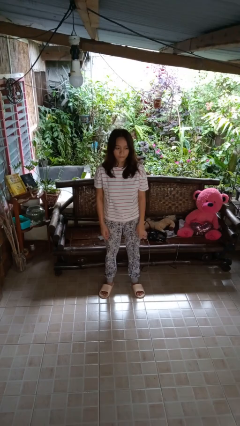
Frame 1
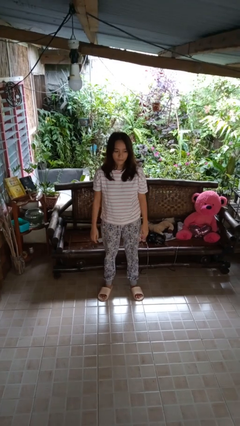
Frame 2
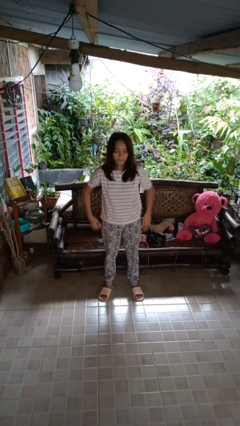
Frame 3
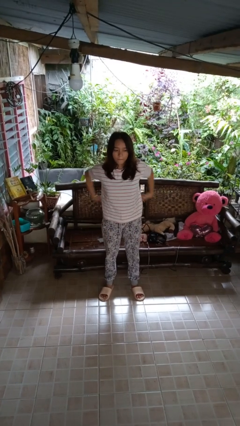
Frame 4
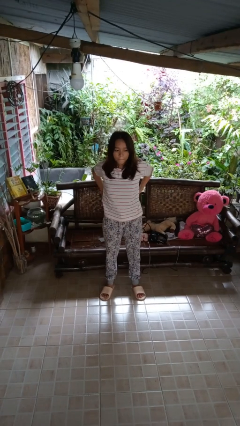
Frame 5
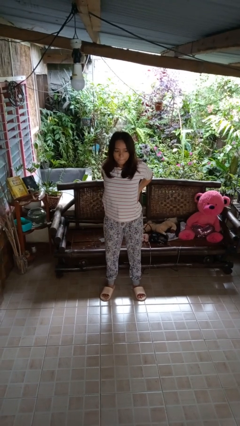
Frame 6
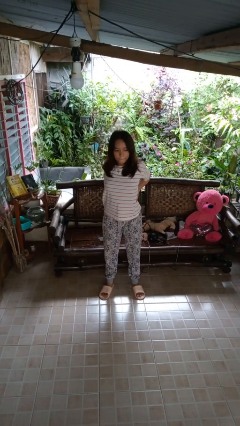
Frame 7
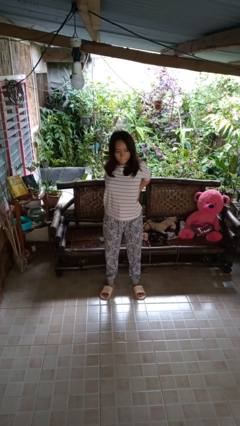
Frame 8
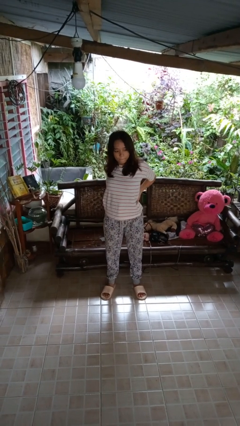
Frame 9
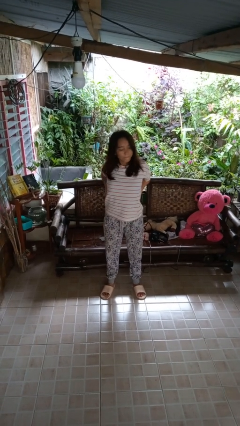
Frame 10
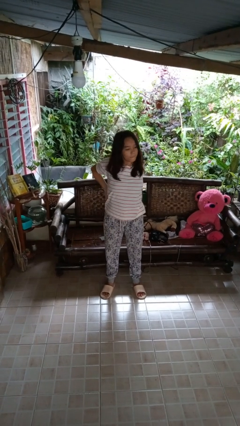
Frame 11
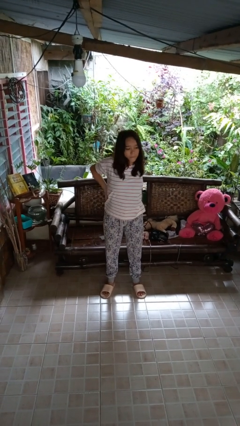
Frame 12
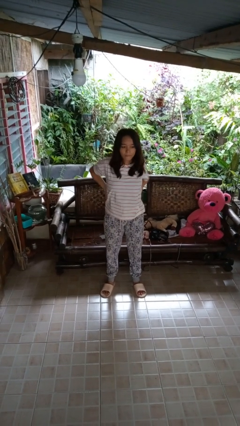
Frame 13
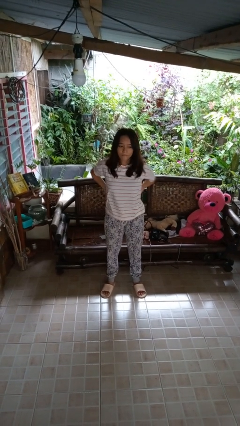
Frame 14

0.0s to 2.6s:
person stretches back

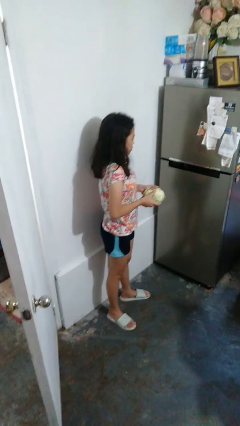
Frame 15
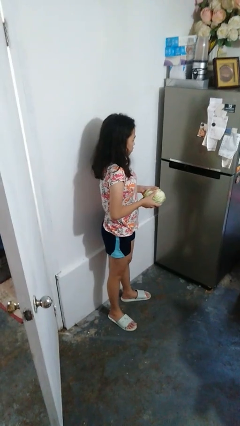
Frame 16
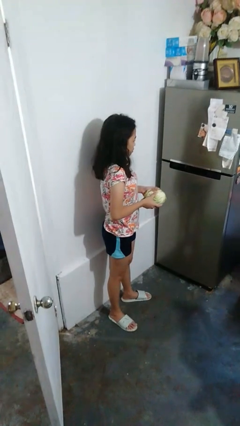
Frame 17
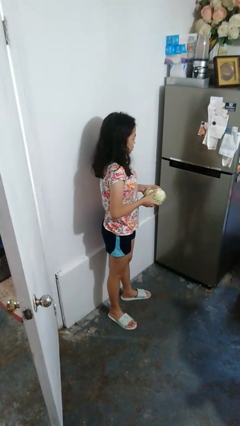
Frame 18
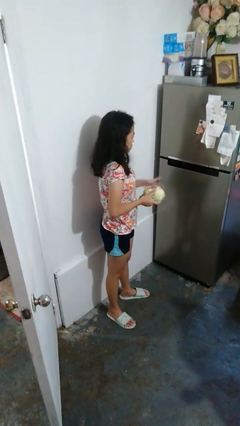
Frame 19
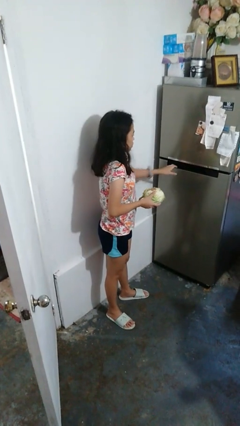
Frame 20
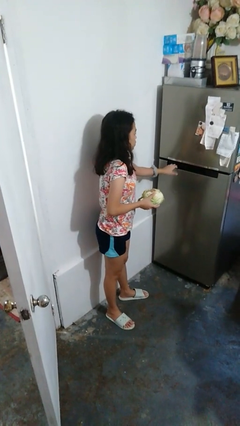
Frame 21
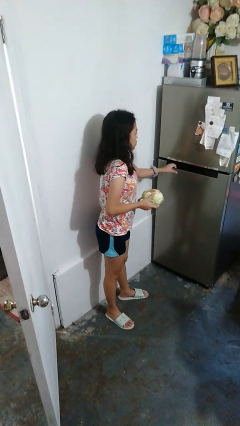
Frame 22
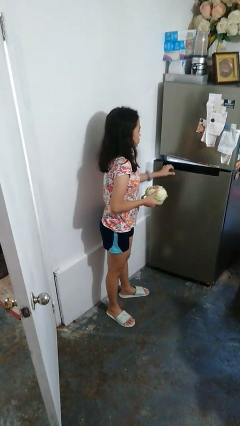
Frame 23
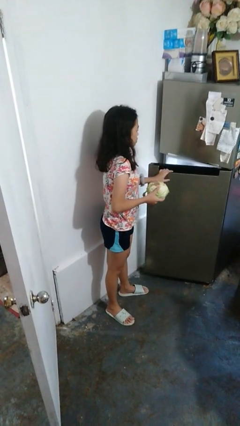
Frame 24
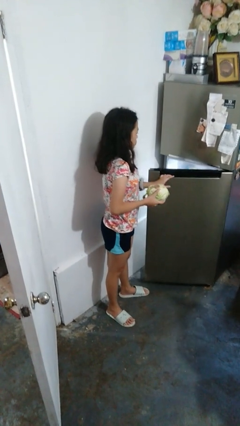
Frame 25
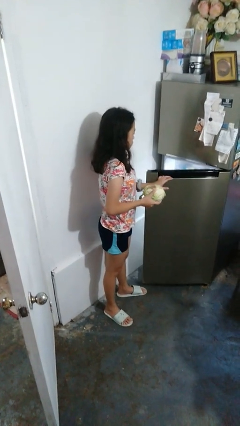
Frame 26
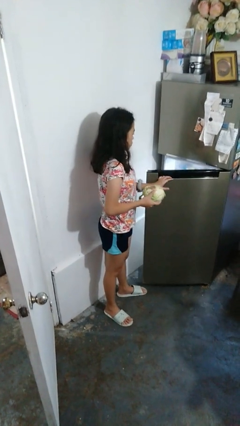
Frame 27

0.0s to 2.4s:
person opens refrigerator

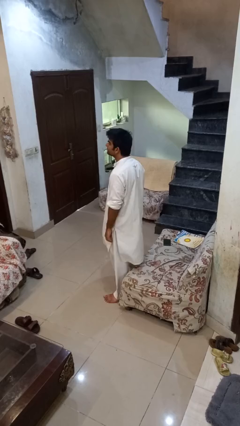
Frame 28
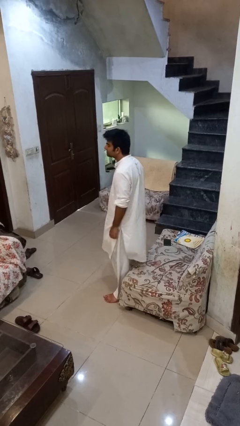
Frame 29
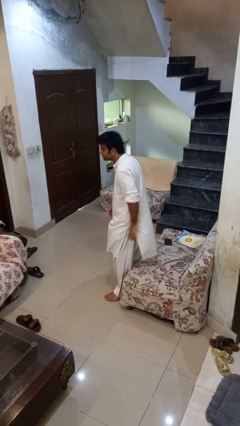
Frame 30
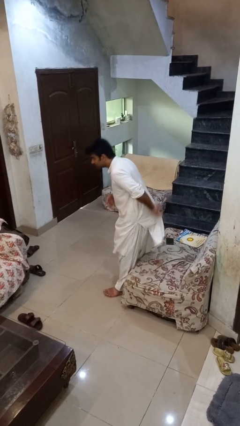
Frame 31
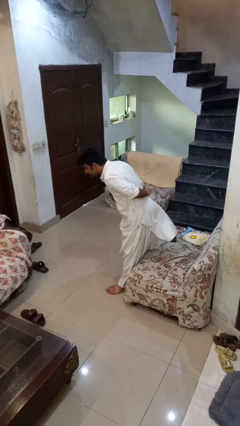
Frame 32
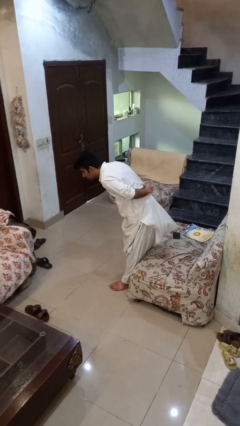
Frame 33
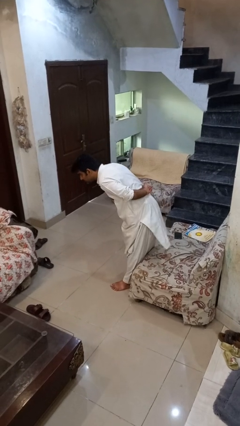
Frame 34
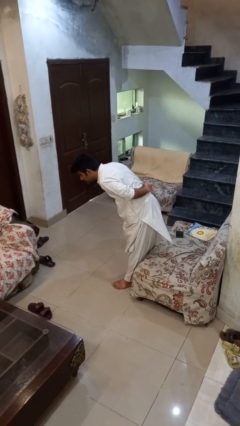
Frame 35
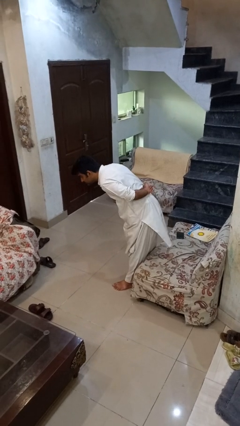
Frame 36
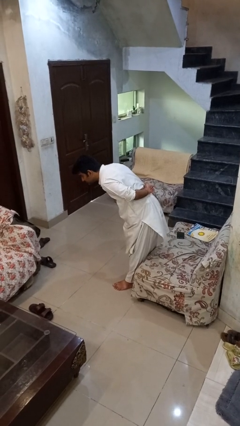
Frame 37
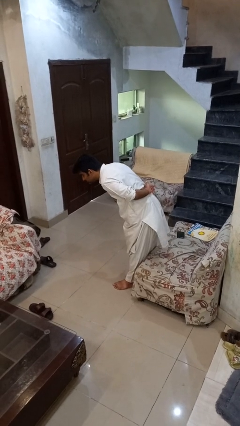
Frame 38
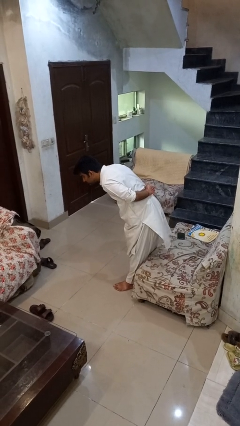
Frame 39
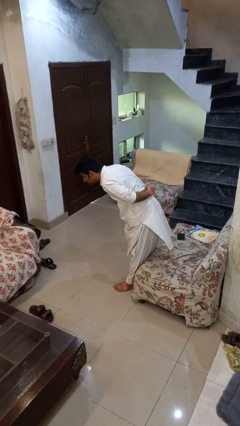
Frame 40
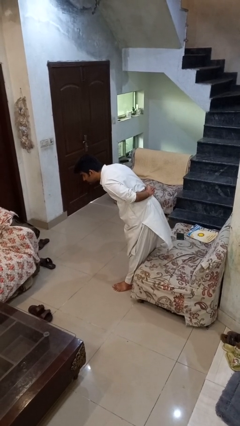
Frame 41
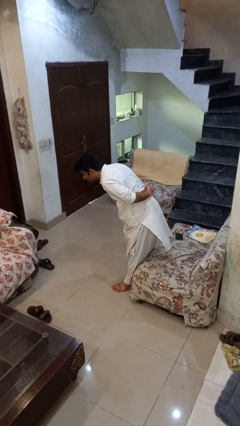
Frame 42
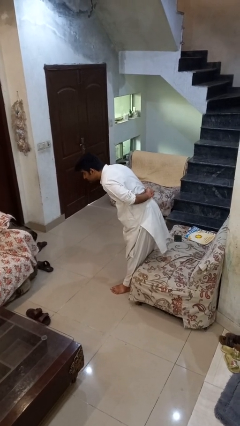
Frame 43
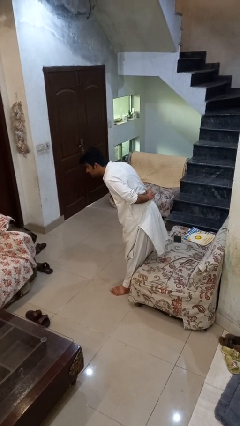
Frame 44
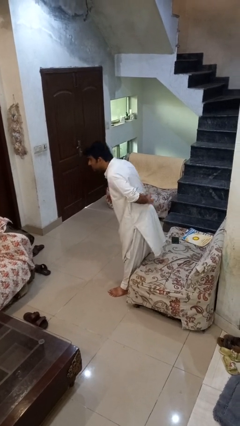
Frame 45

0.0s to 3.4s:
person bows

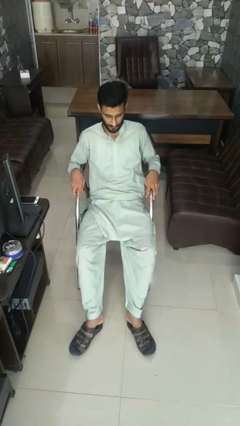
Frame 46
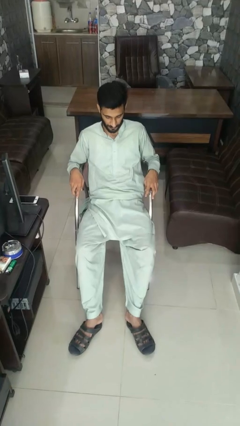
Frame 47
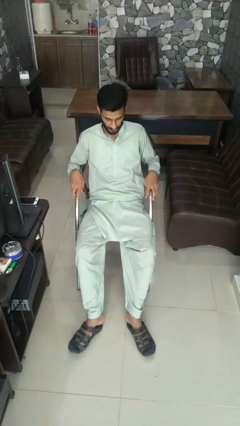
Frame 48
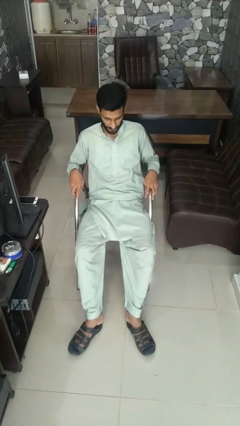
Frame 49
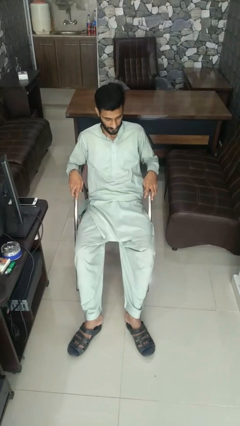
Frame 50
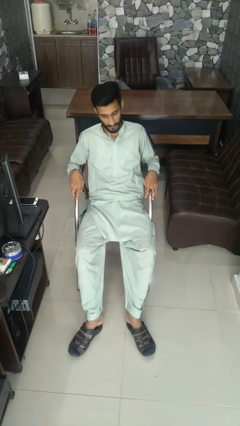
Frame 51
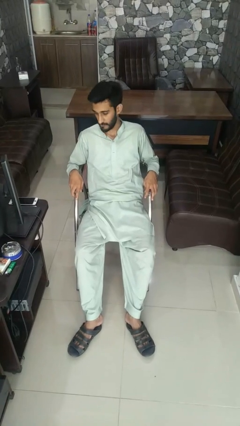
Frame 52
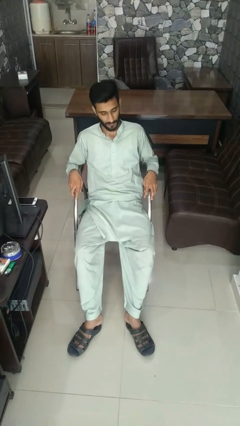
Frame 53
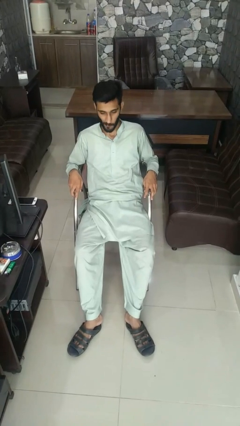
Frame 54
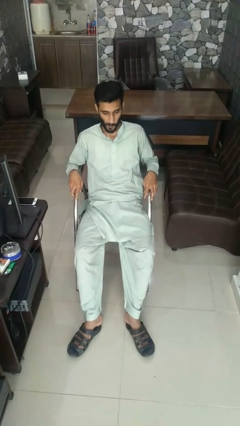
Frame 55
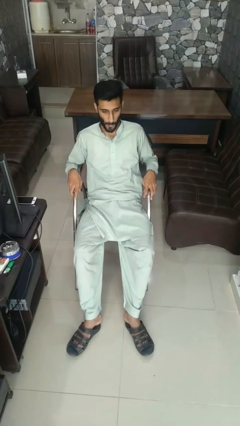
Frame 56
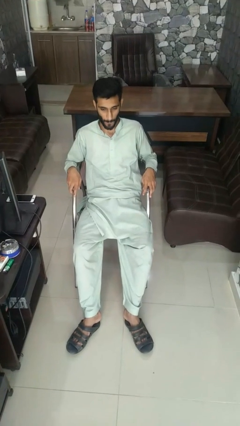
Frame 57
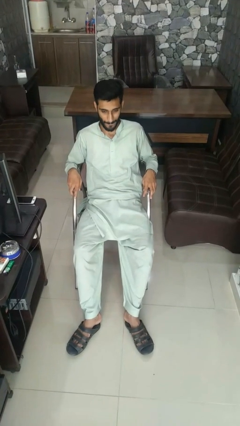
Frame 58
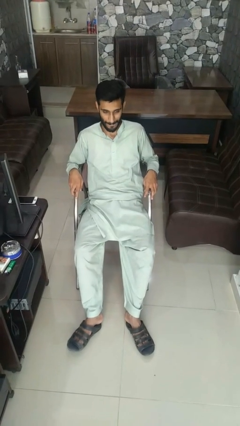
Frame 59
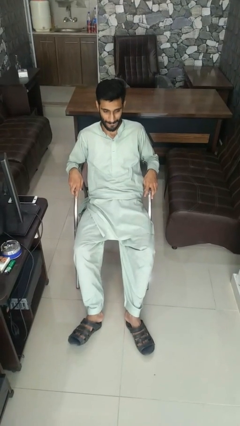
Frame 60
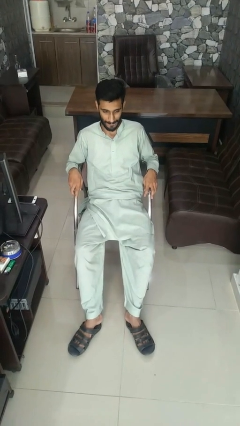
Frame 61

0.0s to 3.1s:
person shakes head

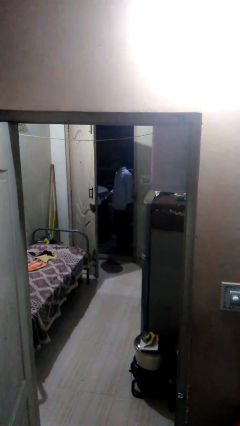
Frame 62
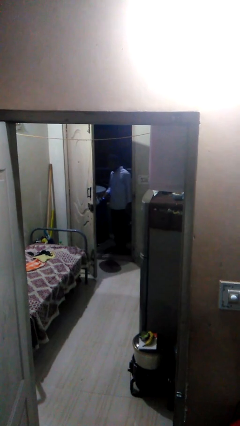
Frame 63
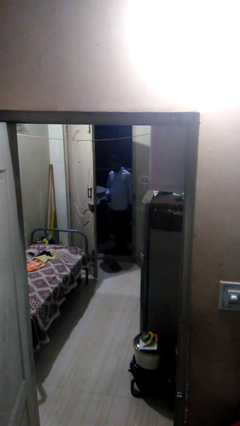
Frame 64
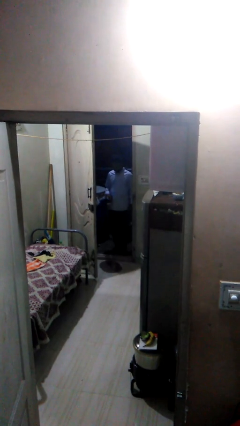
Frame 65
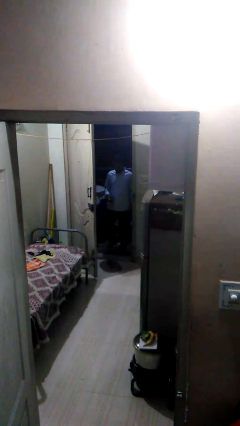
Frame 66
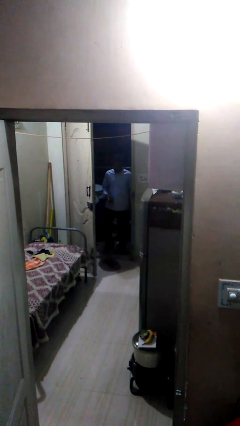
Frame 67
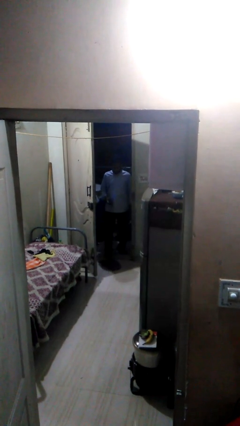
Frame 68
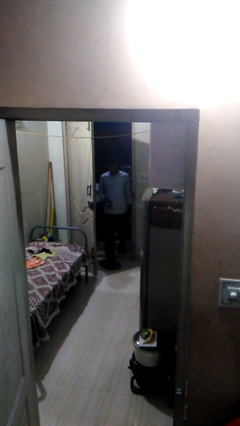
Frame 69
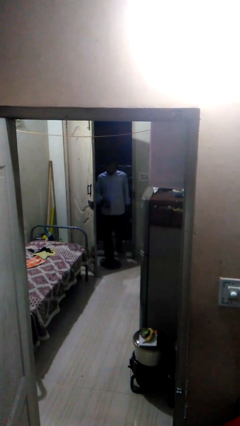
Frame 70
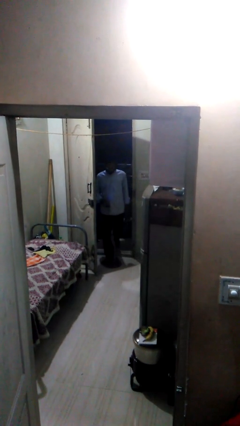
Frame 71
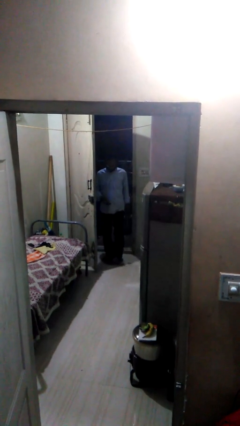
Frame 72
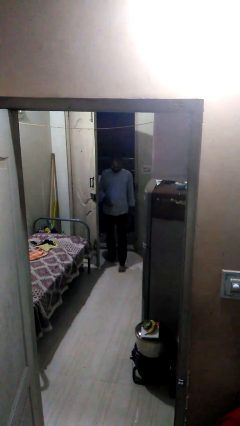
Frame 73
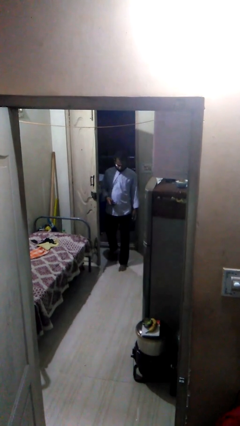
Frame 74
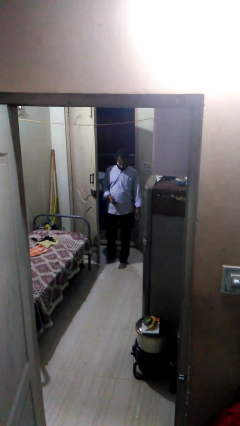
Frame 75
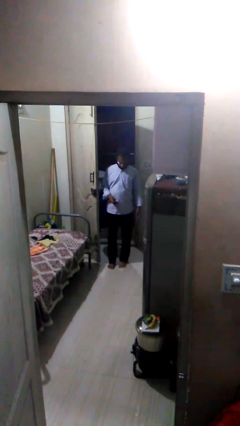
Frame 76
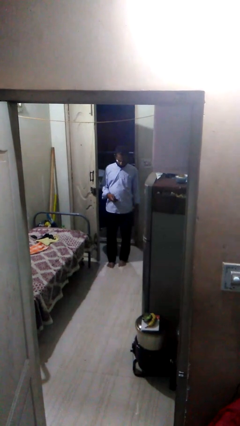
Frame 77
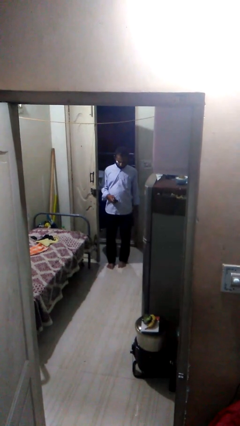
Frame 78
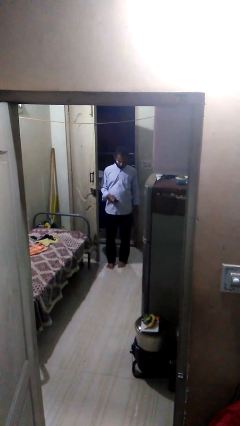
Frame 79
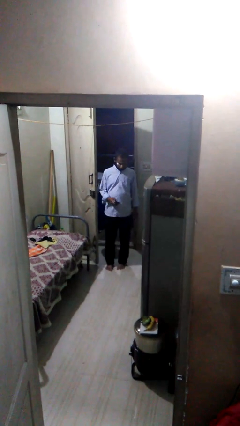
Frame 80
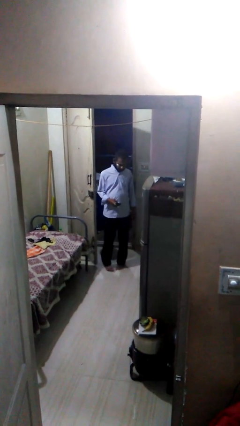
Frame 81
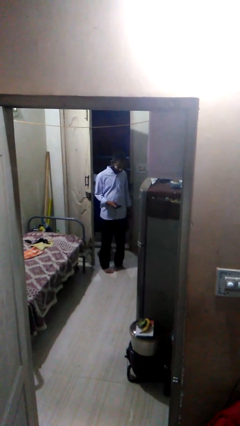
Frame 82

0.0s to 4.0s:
person enters scene through structure

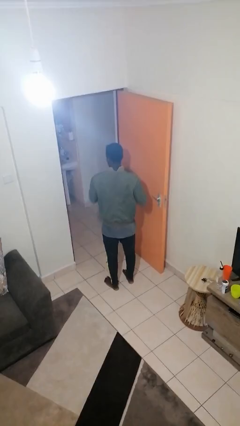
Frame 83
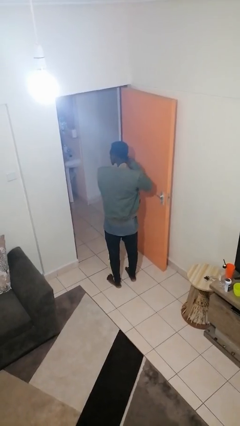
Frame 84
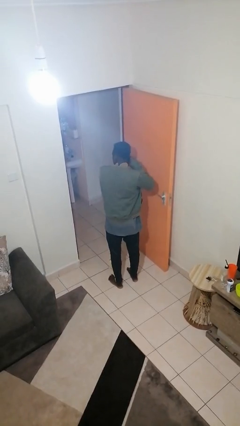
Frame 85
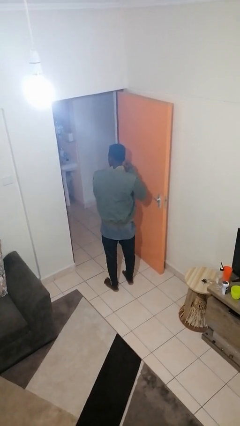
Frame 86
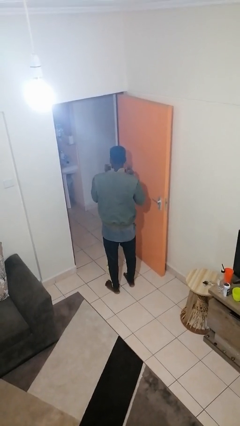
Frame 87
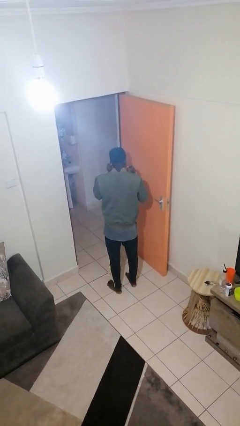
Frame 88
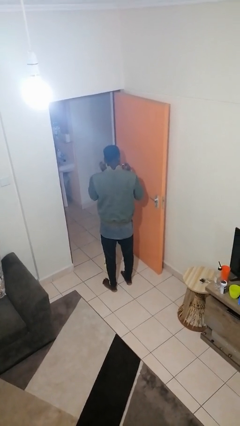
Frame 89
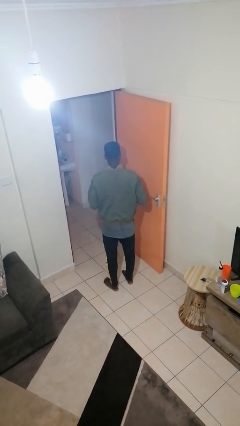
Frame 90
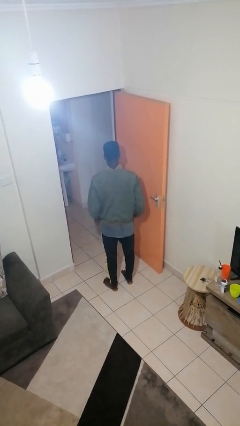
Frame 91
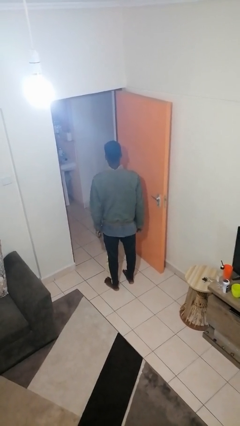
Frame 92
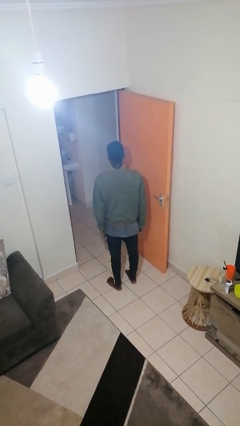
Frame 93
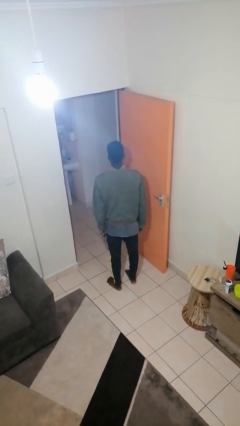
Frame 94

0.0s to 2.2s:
person puts on earrings
